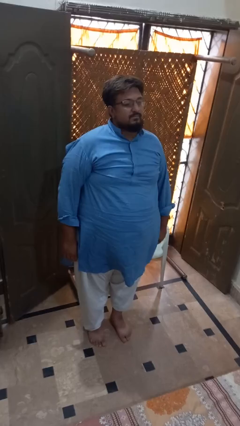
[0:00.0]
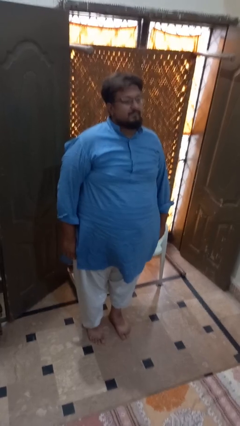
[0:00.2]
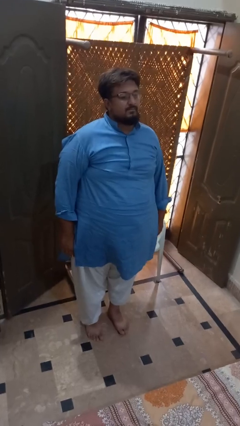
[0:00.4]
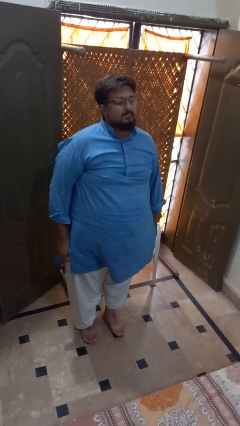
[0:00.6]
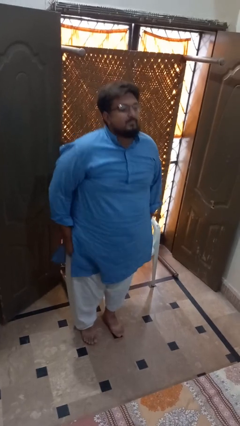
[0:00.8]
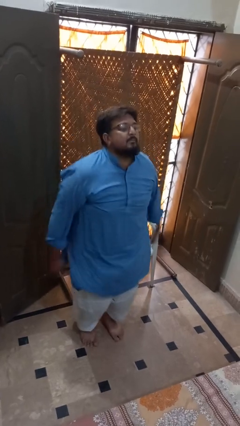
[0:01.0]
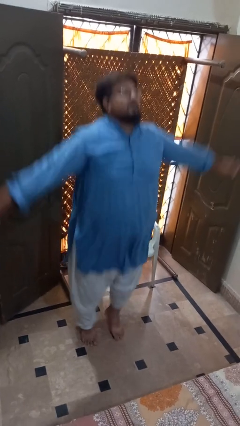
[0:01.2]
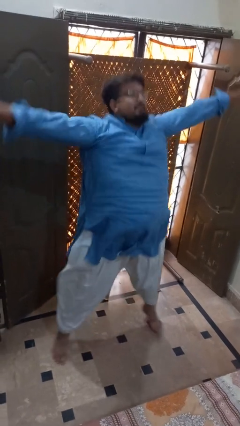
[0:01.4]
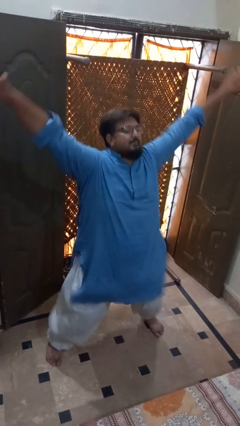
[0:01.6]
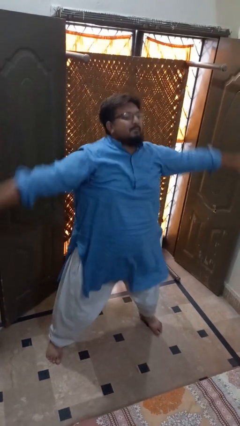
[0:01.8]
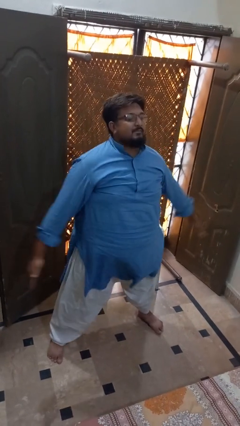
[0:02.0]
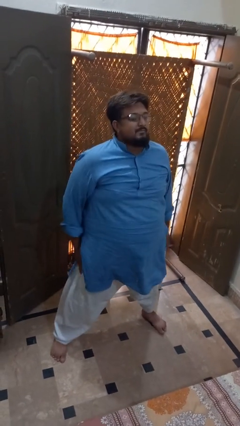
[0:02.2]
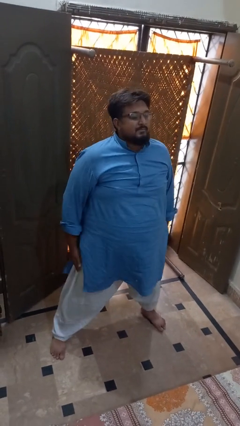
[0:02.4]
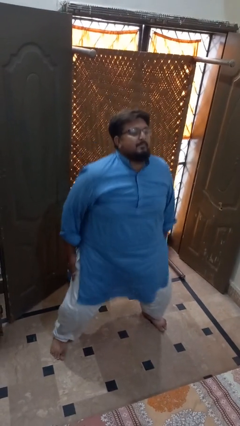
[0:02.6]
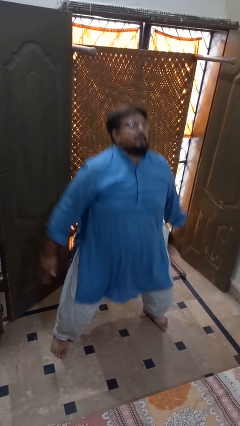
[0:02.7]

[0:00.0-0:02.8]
person exercises with jumping jacks

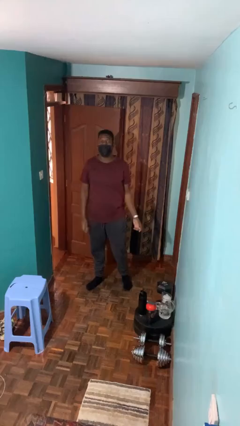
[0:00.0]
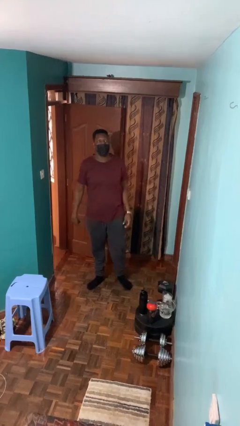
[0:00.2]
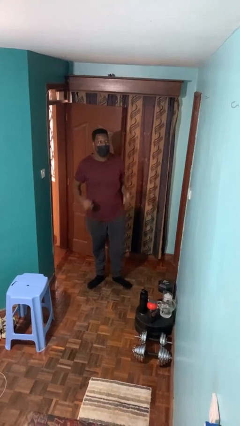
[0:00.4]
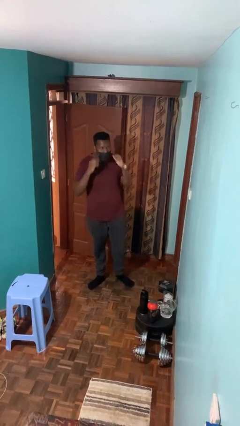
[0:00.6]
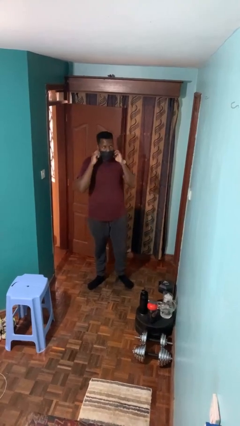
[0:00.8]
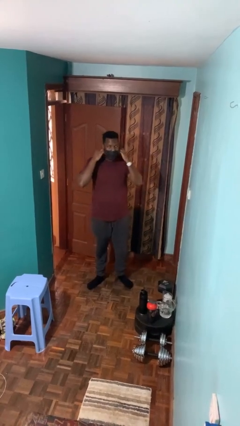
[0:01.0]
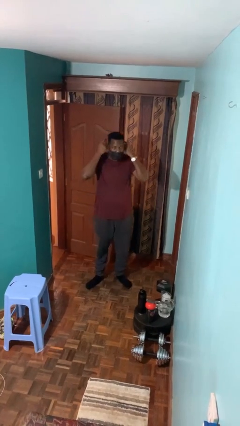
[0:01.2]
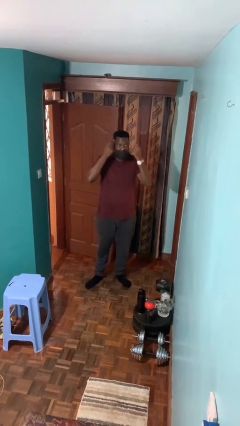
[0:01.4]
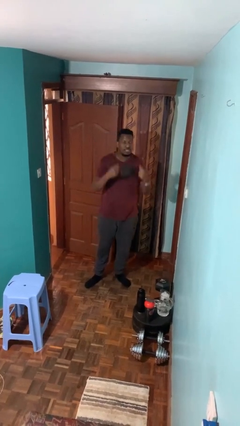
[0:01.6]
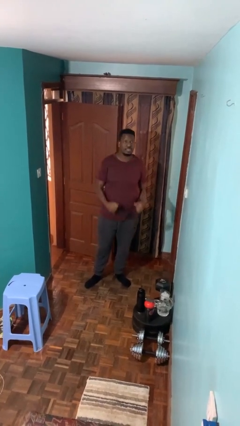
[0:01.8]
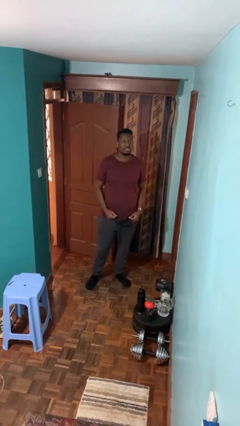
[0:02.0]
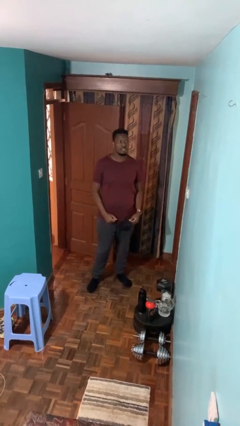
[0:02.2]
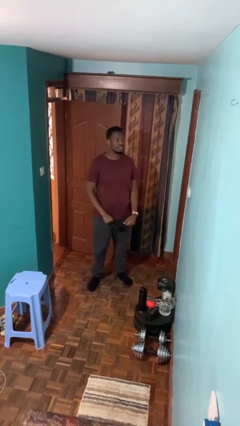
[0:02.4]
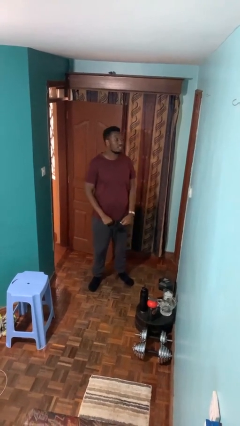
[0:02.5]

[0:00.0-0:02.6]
person takes off facemask

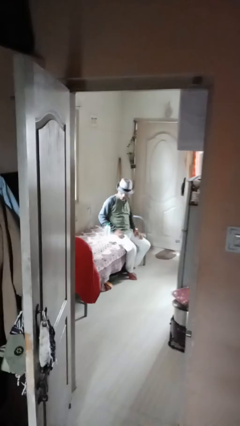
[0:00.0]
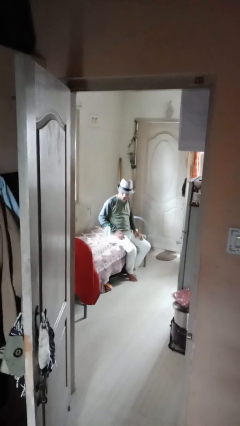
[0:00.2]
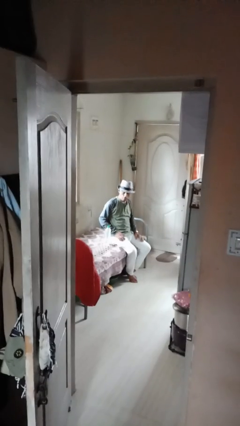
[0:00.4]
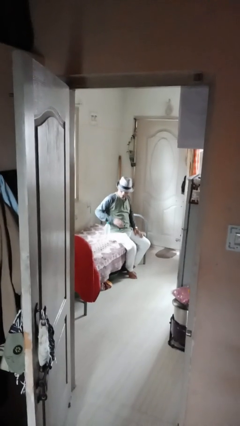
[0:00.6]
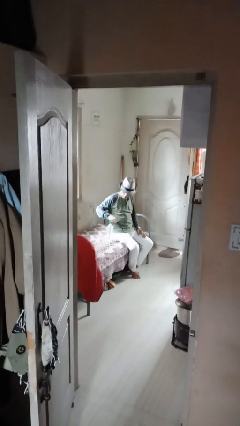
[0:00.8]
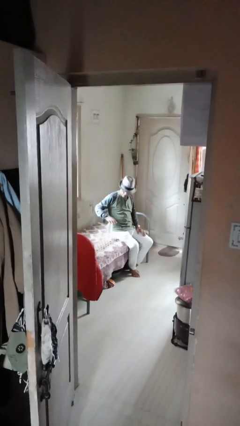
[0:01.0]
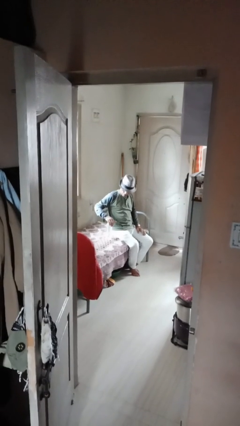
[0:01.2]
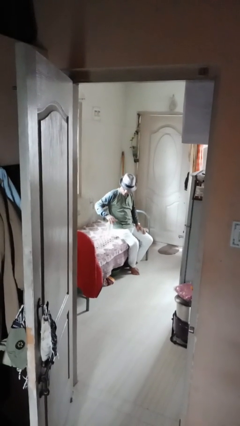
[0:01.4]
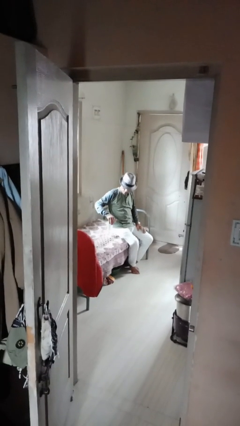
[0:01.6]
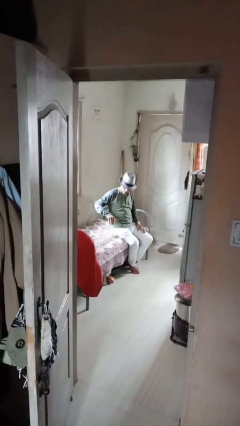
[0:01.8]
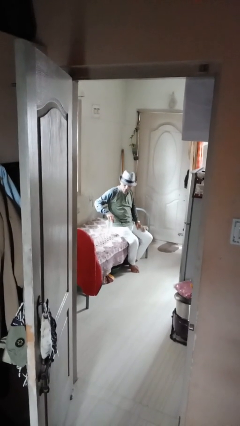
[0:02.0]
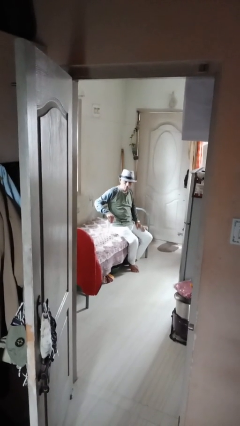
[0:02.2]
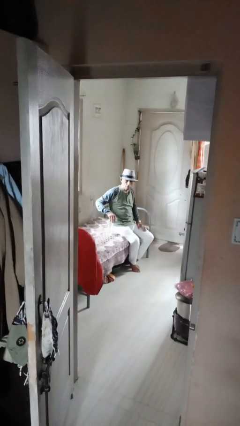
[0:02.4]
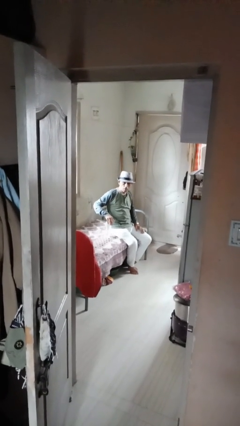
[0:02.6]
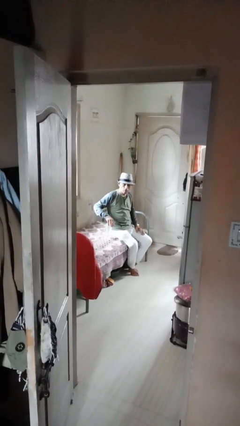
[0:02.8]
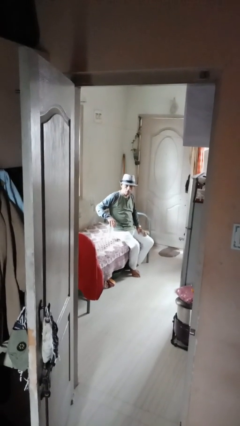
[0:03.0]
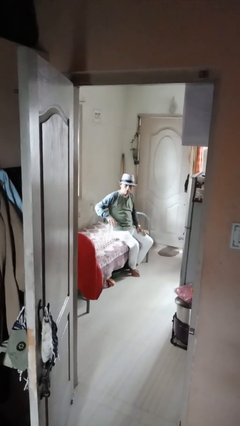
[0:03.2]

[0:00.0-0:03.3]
person taps object with finger

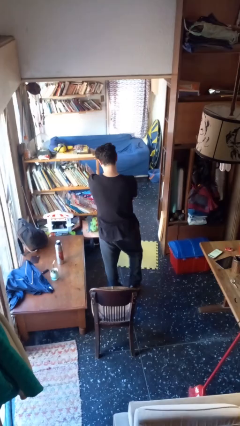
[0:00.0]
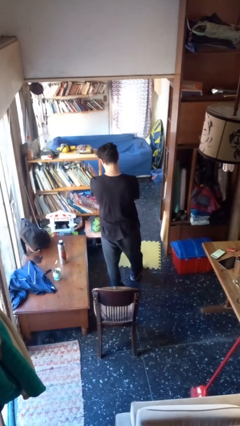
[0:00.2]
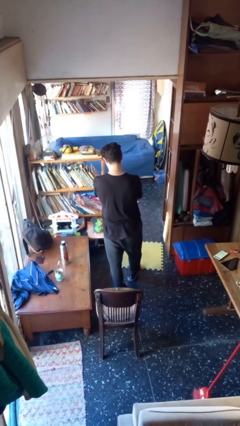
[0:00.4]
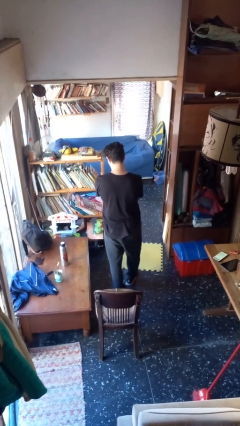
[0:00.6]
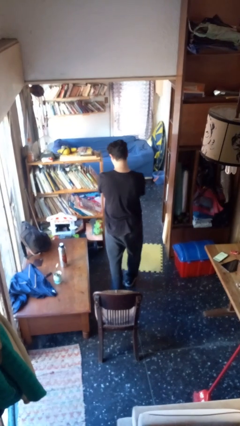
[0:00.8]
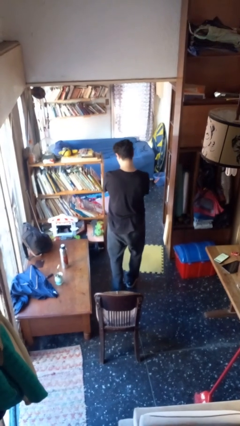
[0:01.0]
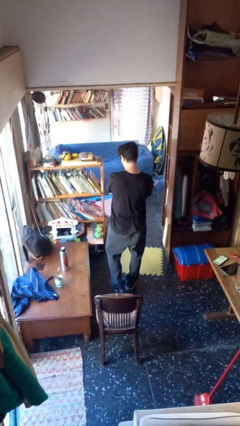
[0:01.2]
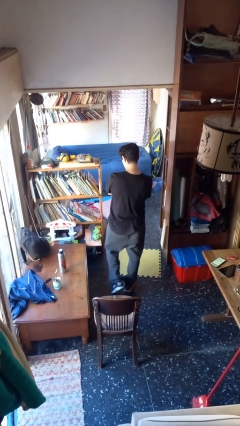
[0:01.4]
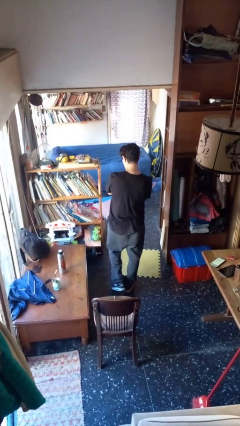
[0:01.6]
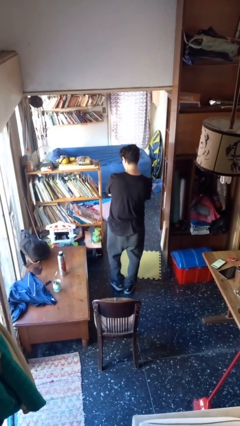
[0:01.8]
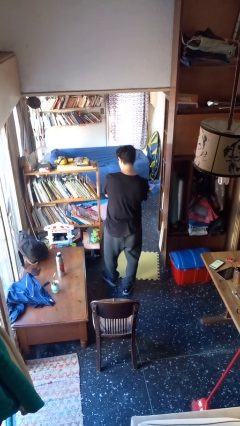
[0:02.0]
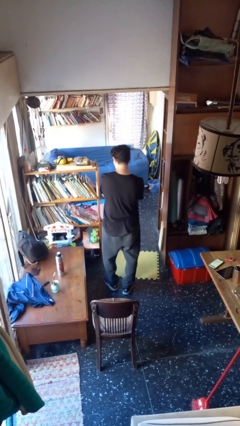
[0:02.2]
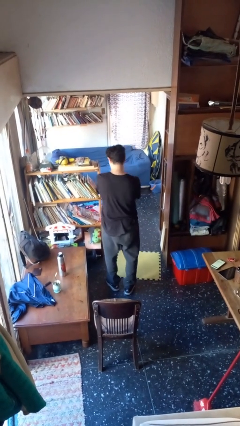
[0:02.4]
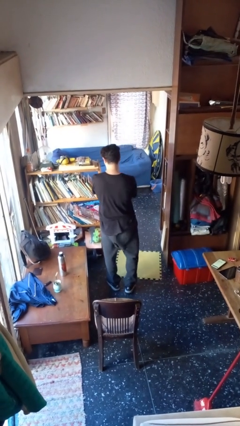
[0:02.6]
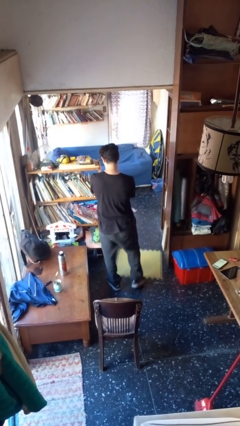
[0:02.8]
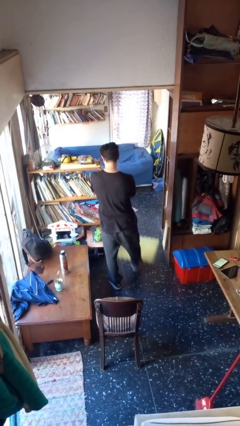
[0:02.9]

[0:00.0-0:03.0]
person crosses arms

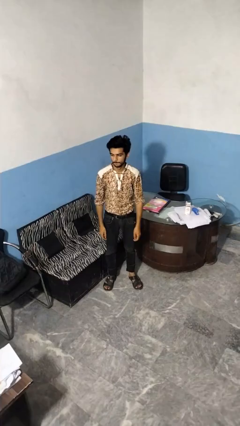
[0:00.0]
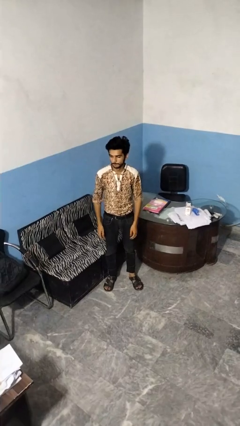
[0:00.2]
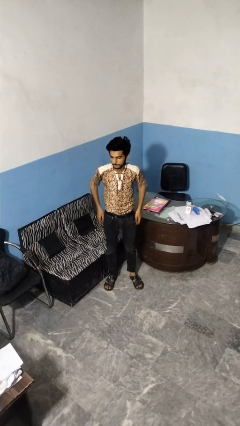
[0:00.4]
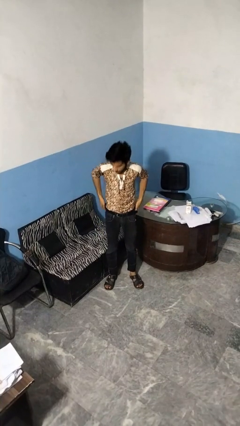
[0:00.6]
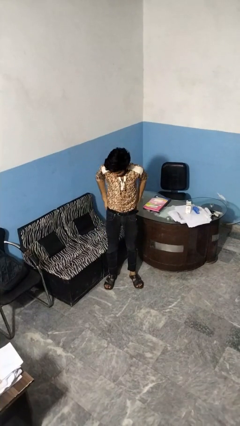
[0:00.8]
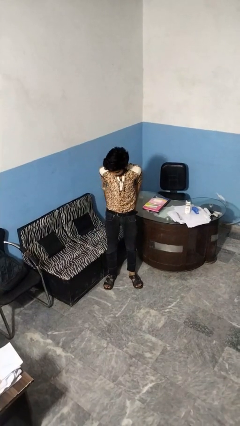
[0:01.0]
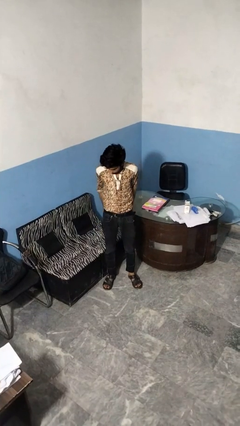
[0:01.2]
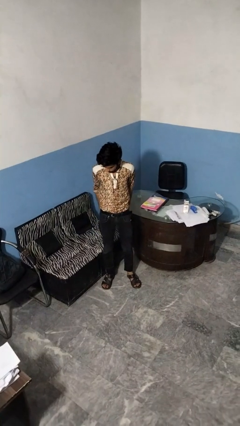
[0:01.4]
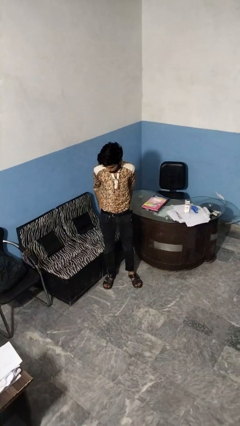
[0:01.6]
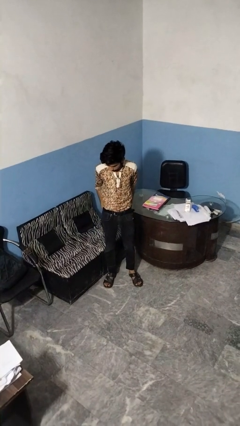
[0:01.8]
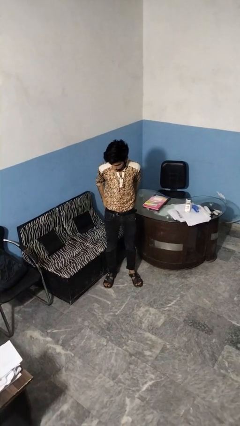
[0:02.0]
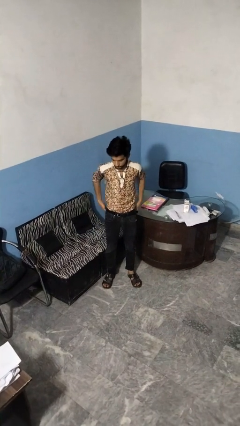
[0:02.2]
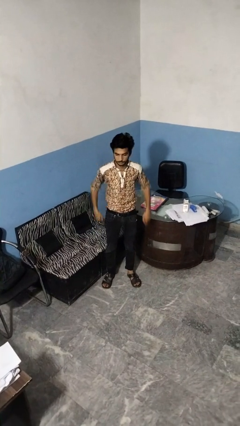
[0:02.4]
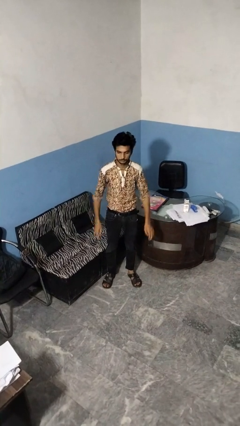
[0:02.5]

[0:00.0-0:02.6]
person puts hands in back pockets

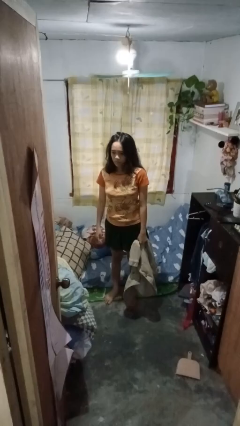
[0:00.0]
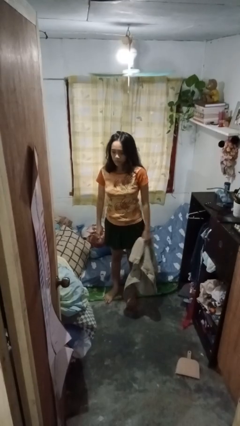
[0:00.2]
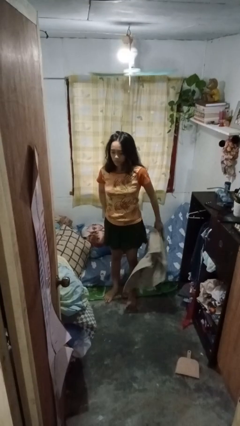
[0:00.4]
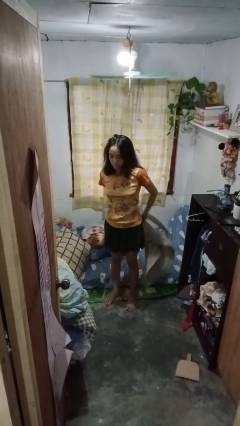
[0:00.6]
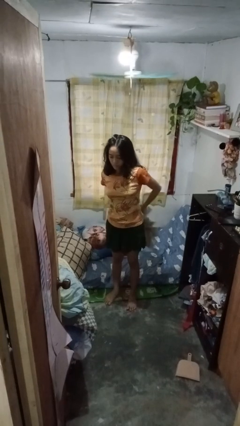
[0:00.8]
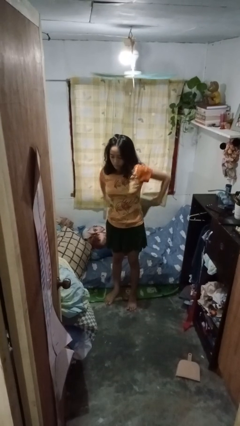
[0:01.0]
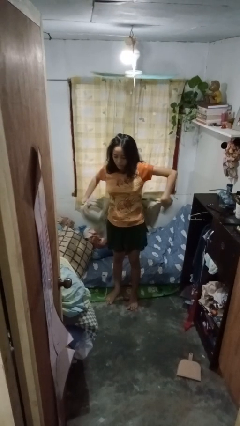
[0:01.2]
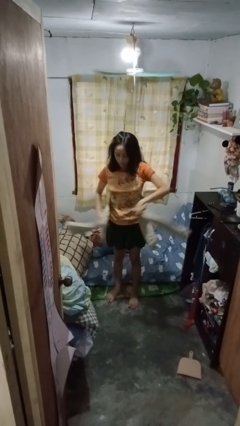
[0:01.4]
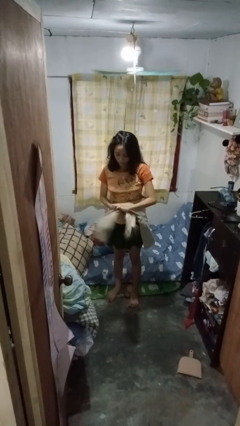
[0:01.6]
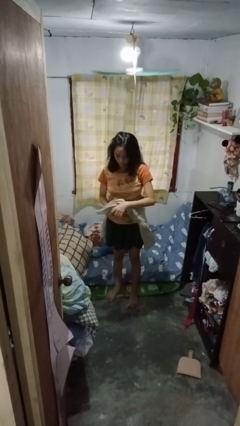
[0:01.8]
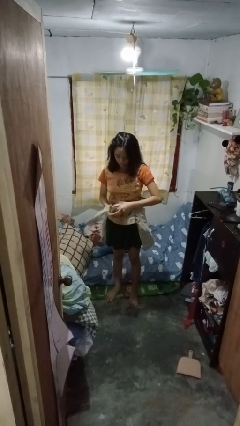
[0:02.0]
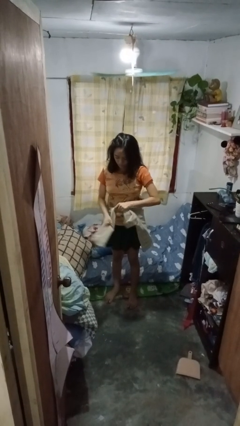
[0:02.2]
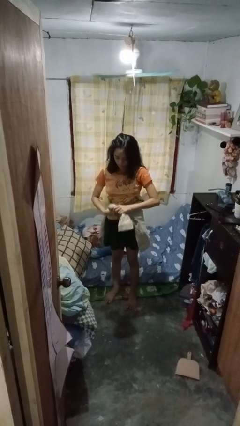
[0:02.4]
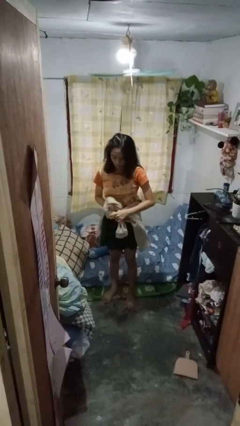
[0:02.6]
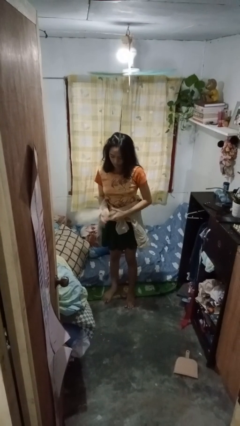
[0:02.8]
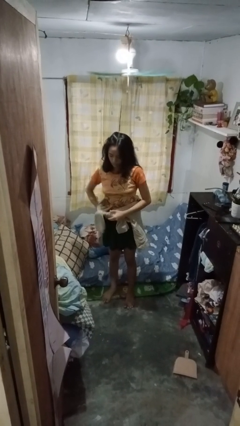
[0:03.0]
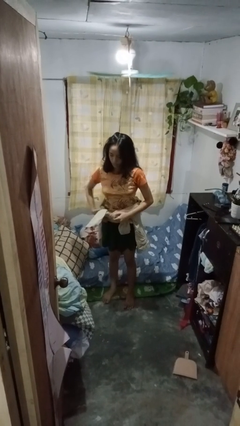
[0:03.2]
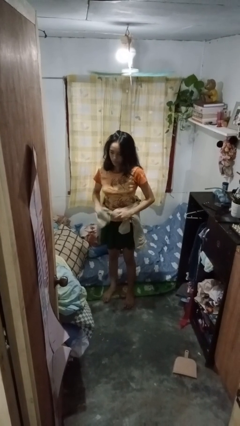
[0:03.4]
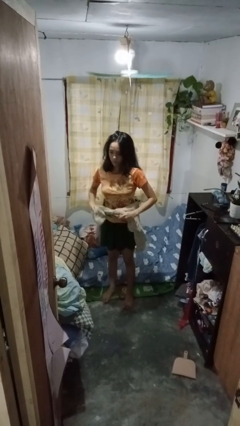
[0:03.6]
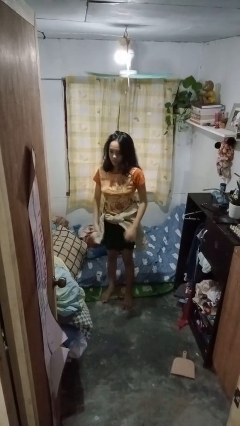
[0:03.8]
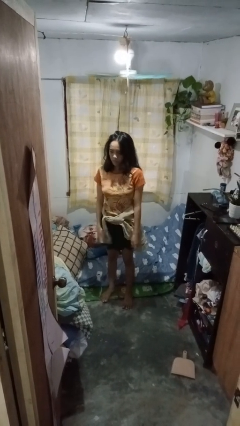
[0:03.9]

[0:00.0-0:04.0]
person ties jacket around waist
